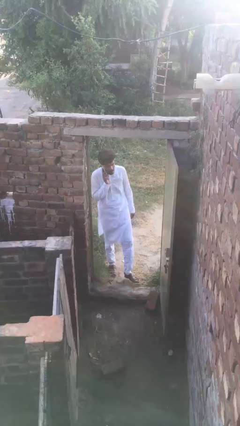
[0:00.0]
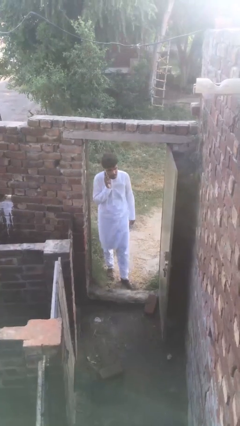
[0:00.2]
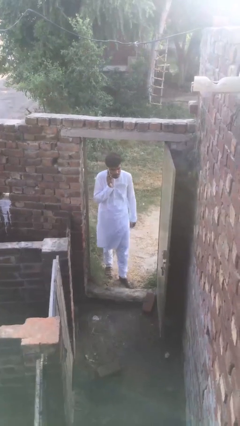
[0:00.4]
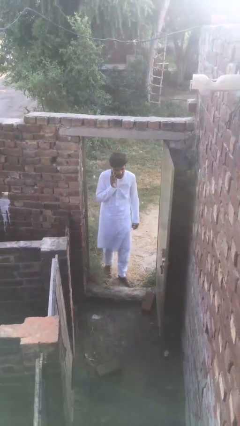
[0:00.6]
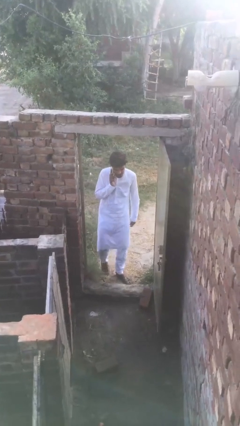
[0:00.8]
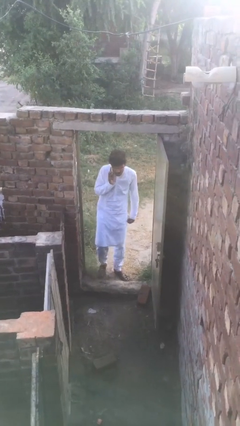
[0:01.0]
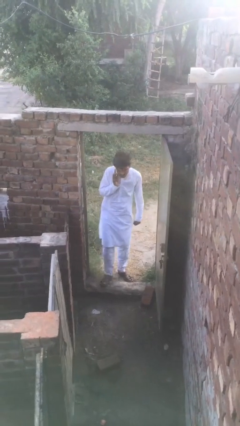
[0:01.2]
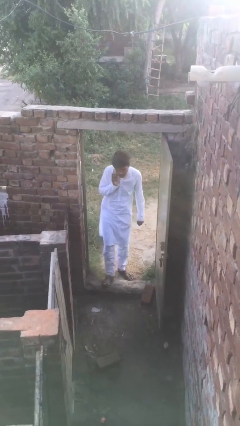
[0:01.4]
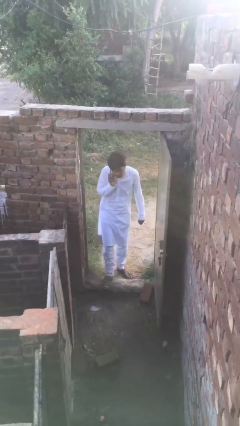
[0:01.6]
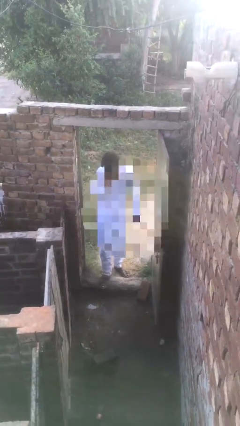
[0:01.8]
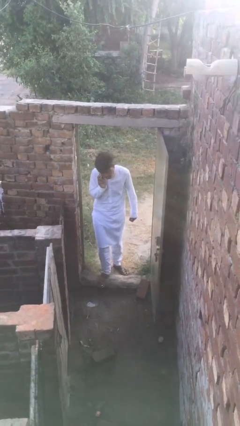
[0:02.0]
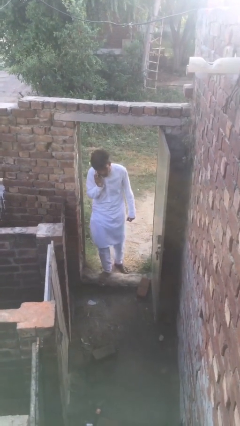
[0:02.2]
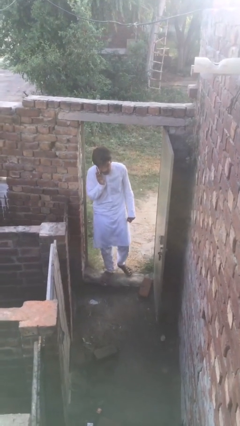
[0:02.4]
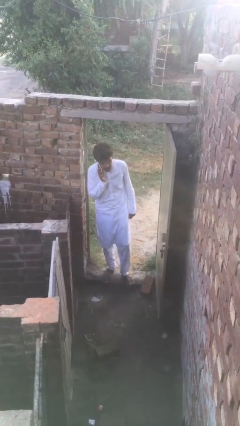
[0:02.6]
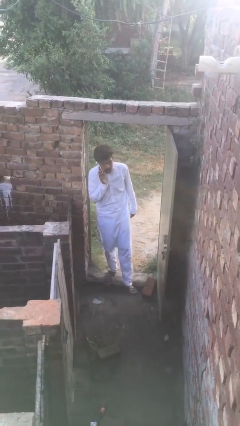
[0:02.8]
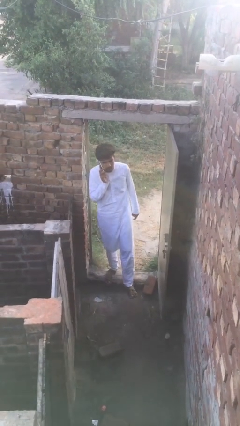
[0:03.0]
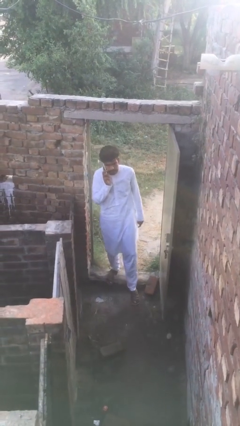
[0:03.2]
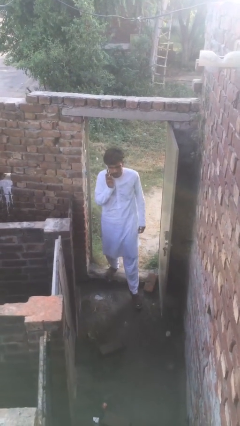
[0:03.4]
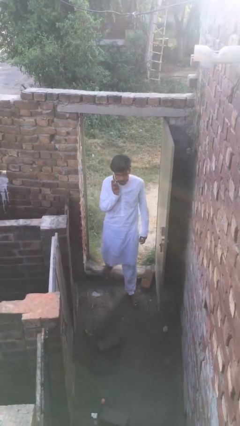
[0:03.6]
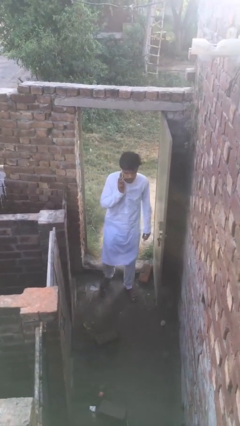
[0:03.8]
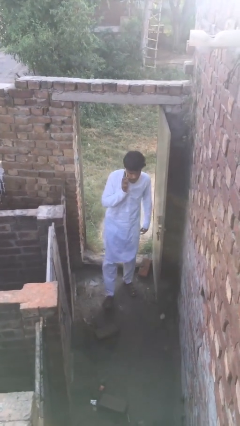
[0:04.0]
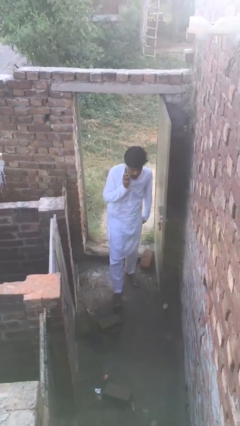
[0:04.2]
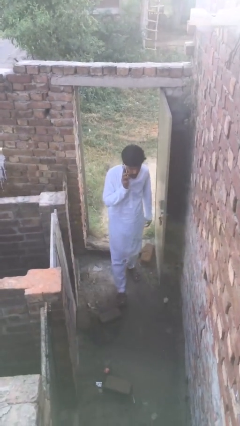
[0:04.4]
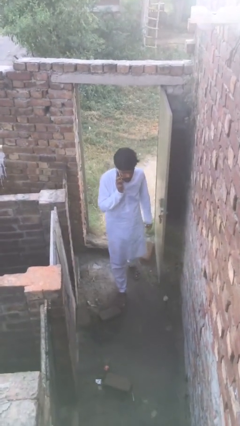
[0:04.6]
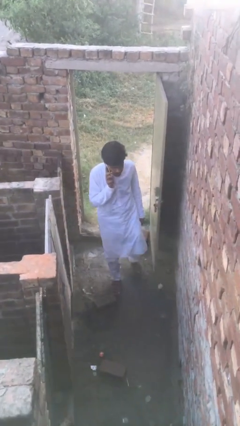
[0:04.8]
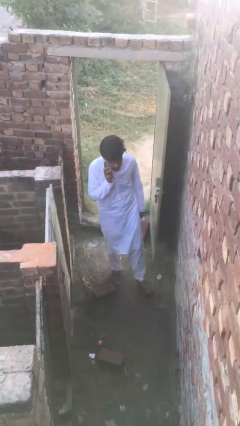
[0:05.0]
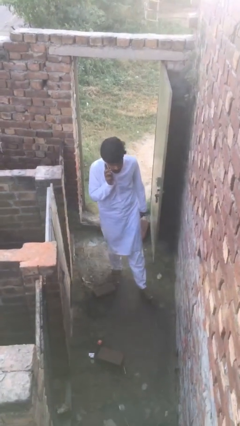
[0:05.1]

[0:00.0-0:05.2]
person enters scene through structure

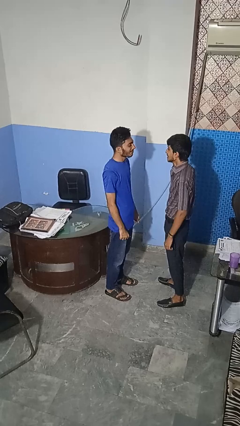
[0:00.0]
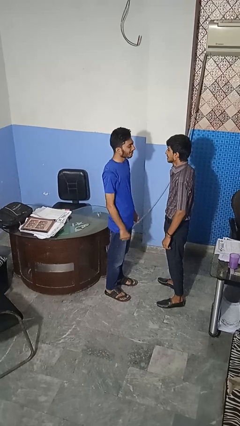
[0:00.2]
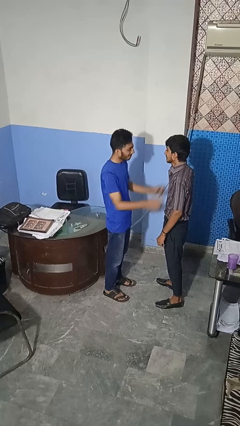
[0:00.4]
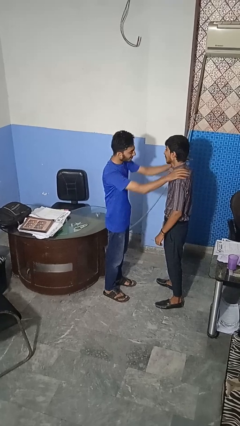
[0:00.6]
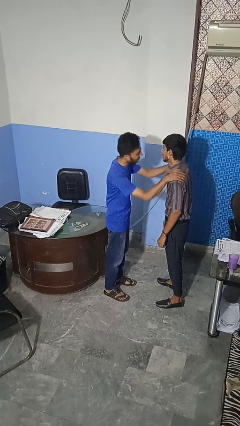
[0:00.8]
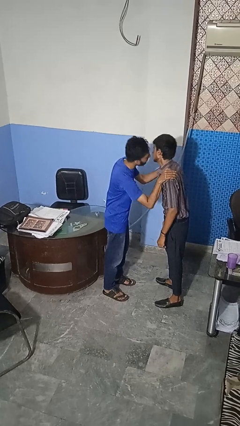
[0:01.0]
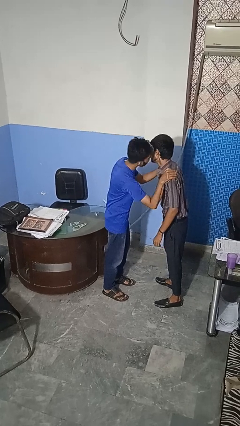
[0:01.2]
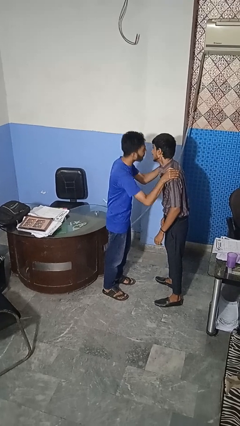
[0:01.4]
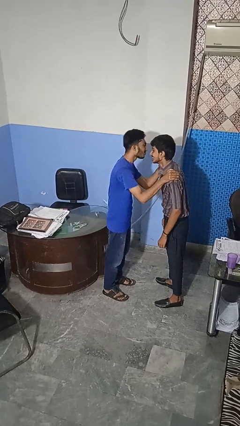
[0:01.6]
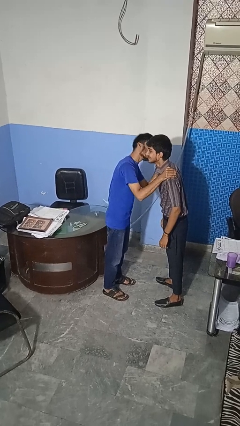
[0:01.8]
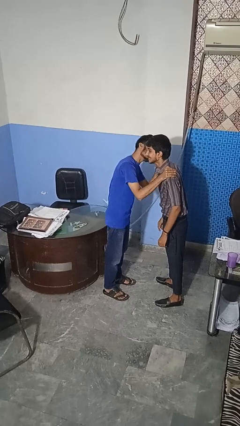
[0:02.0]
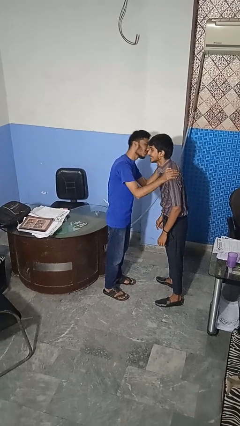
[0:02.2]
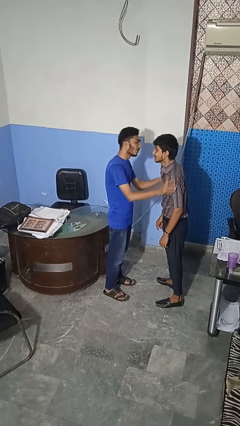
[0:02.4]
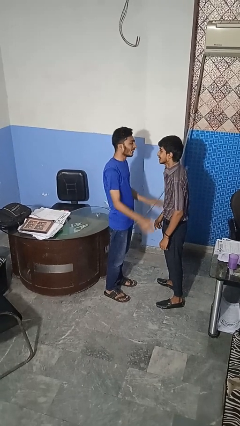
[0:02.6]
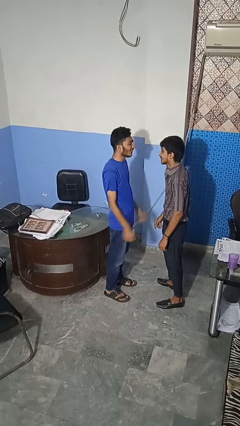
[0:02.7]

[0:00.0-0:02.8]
person kisses cheek of person

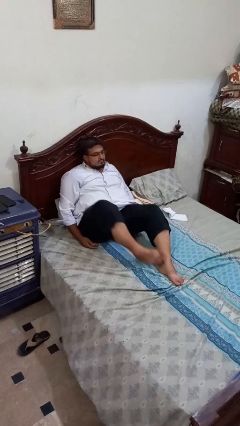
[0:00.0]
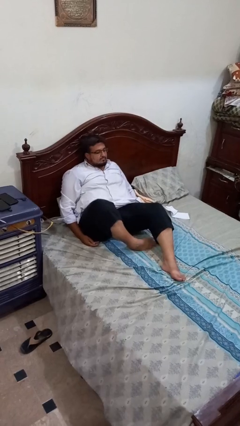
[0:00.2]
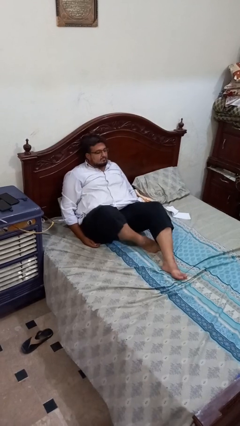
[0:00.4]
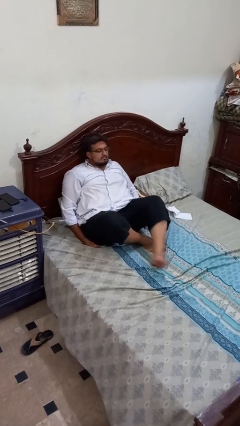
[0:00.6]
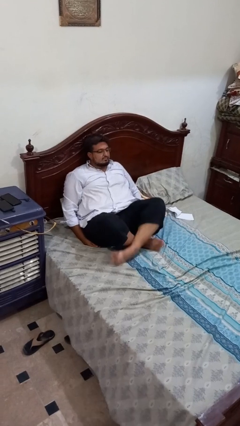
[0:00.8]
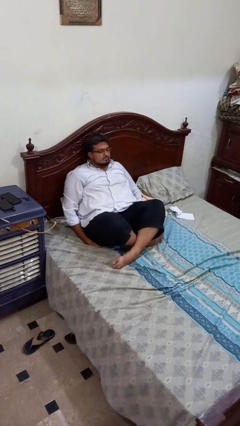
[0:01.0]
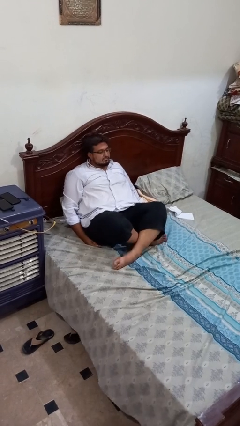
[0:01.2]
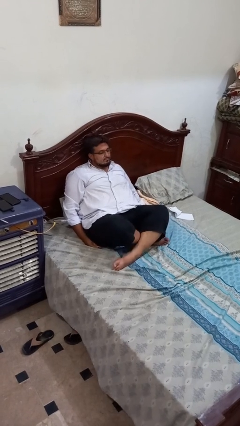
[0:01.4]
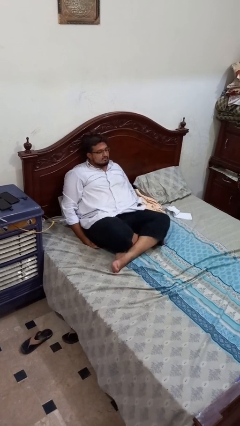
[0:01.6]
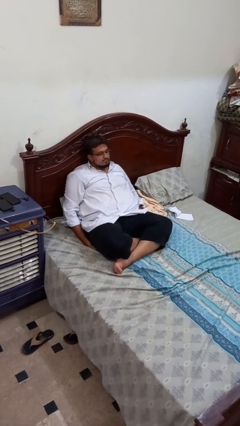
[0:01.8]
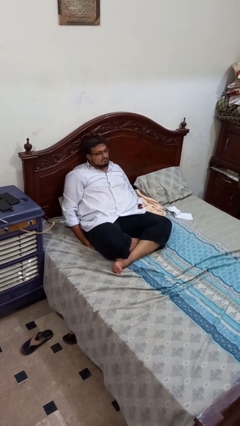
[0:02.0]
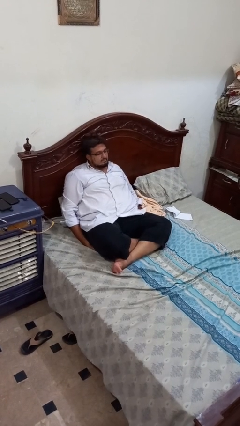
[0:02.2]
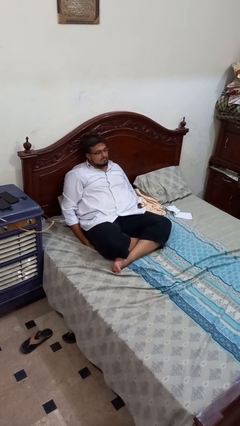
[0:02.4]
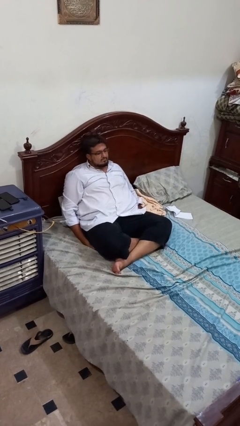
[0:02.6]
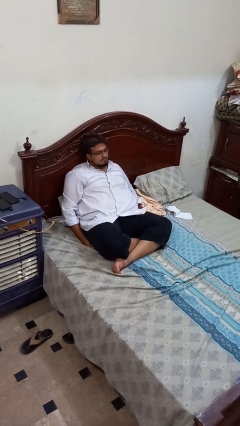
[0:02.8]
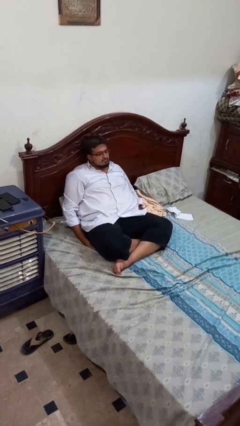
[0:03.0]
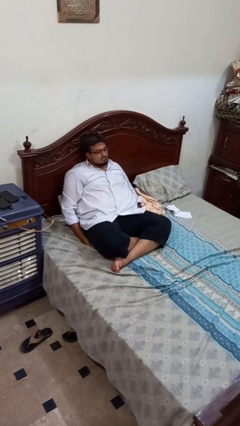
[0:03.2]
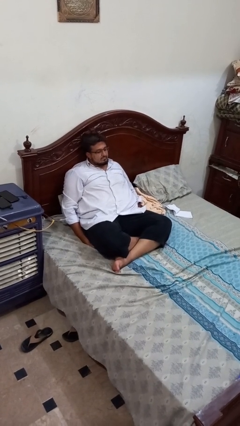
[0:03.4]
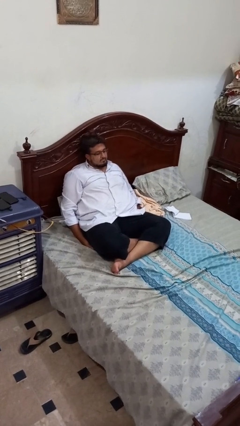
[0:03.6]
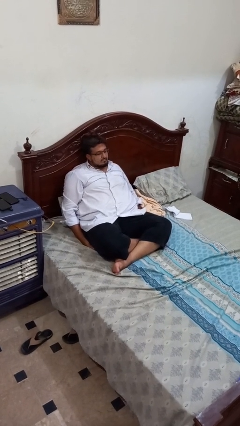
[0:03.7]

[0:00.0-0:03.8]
person crosses legs

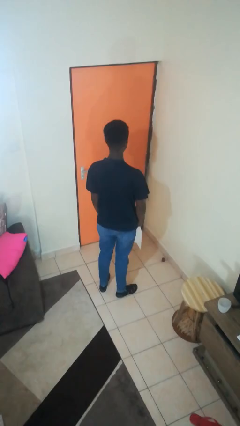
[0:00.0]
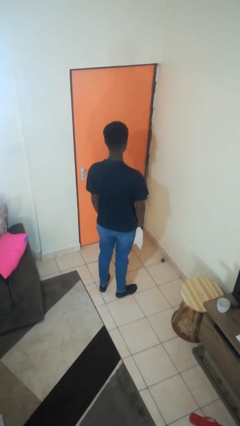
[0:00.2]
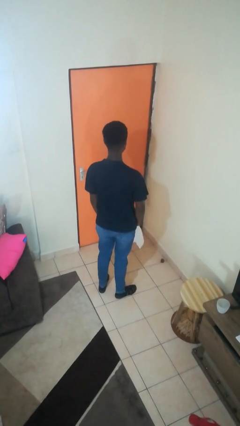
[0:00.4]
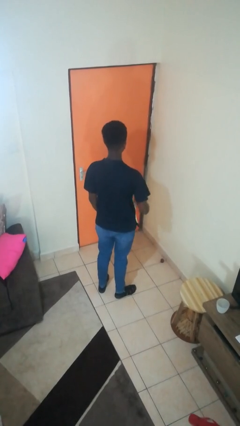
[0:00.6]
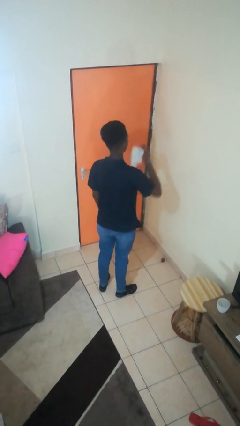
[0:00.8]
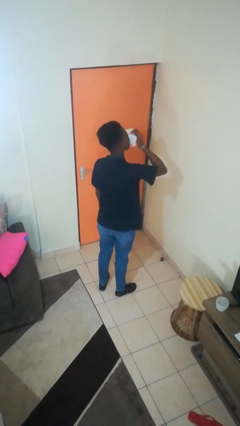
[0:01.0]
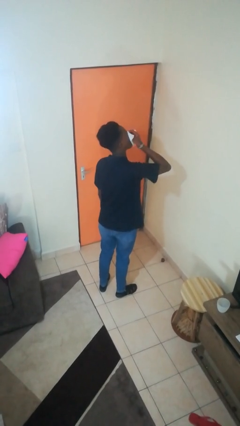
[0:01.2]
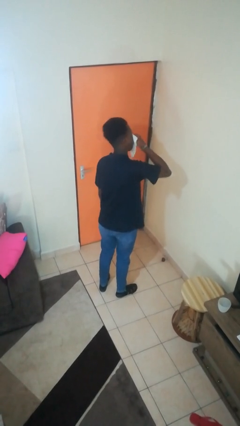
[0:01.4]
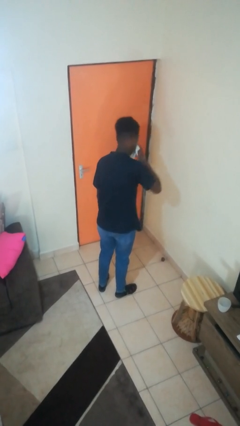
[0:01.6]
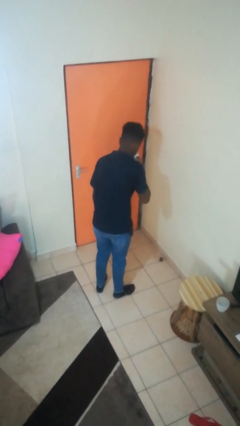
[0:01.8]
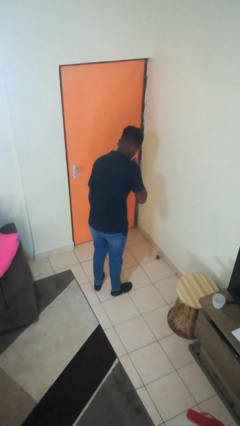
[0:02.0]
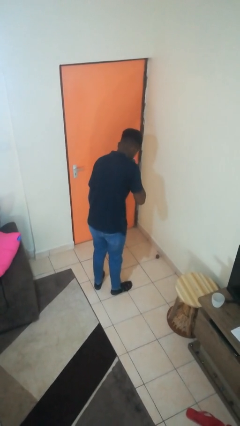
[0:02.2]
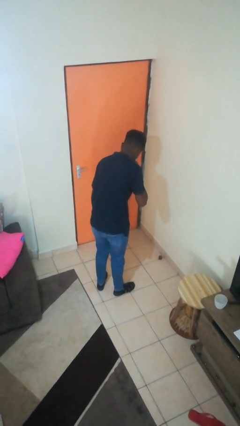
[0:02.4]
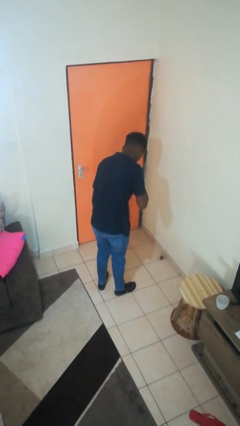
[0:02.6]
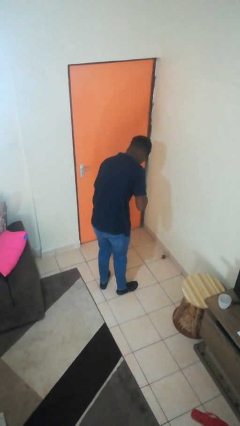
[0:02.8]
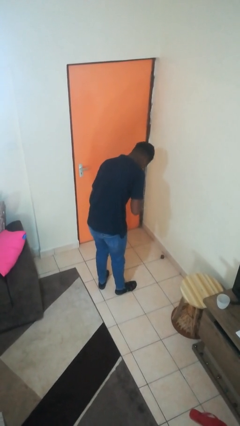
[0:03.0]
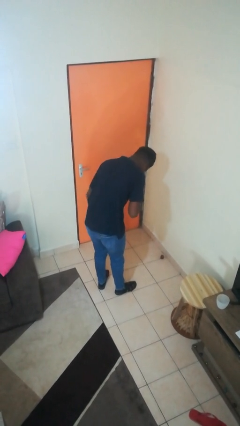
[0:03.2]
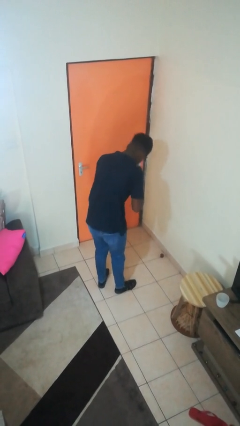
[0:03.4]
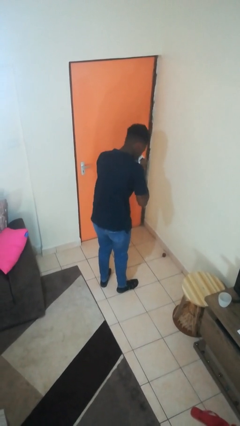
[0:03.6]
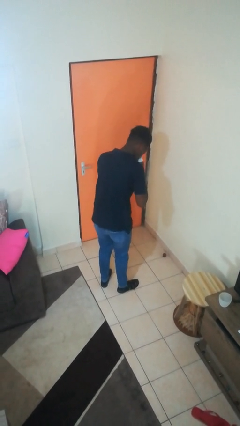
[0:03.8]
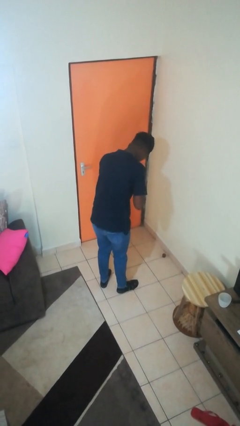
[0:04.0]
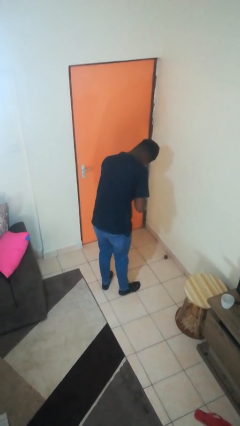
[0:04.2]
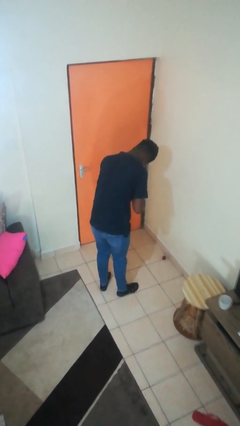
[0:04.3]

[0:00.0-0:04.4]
person blows nose

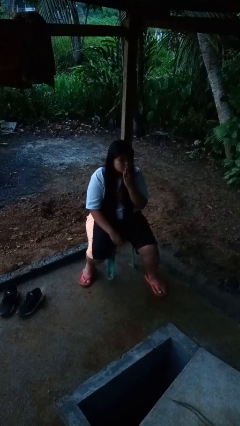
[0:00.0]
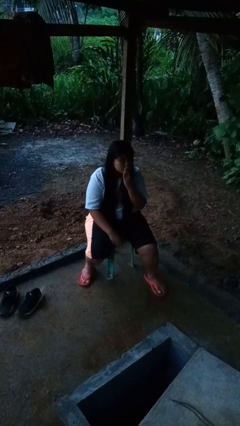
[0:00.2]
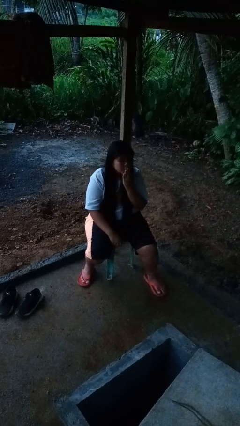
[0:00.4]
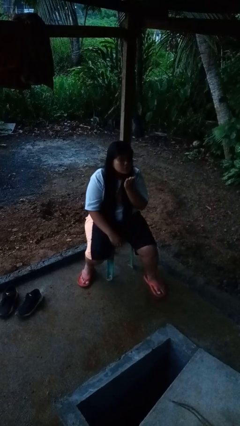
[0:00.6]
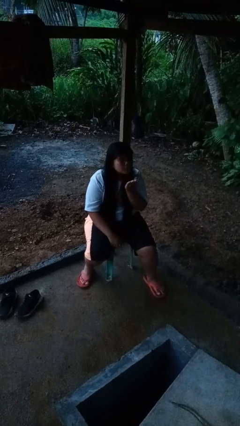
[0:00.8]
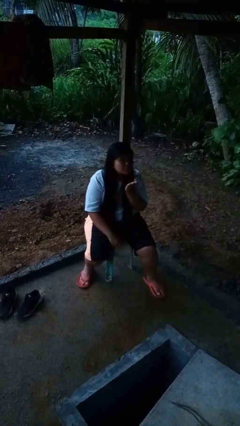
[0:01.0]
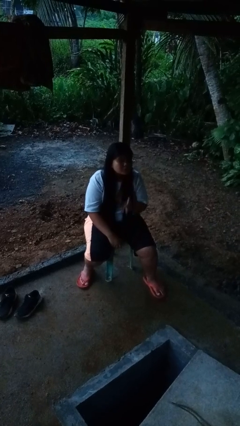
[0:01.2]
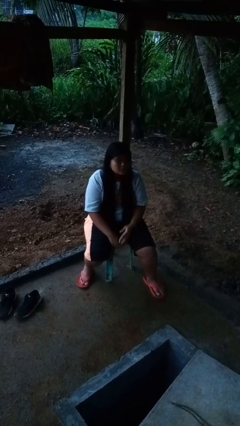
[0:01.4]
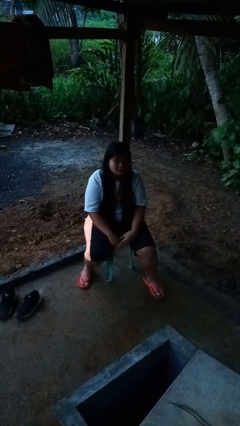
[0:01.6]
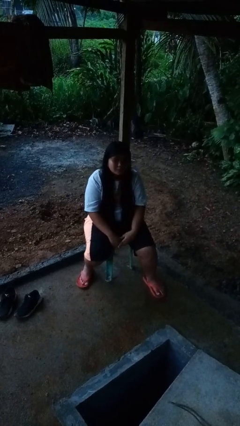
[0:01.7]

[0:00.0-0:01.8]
person gestures blow kiss
